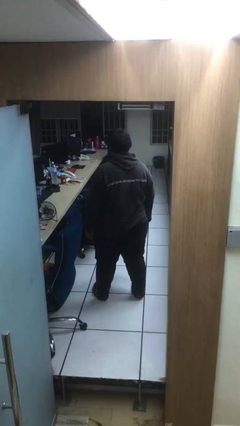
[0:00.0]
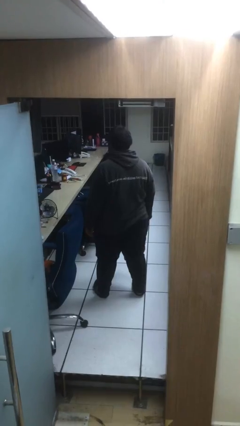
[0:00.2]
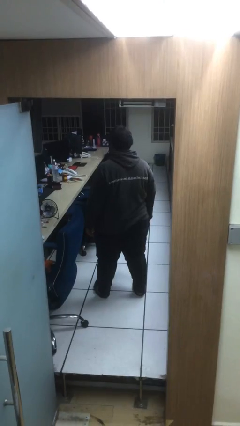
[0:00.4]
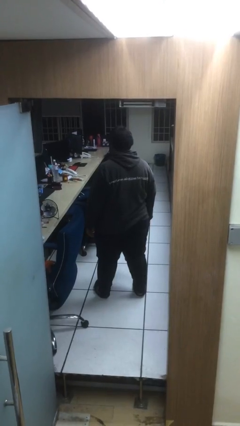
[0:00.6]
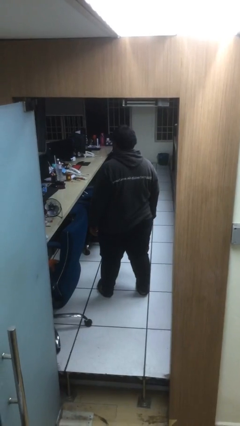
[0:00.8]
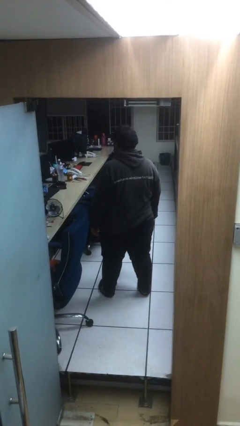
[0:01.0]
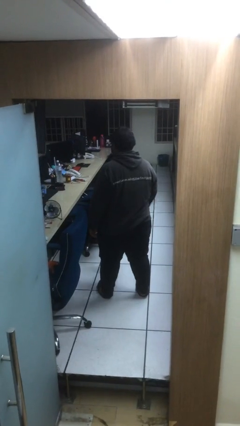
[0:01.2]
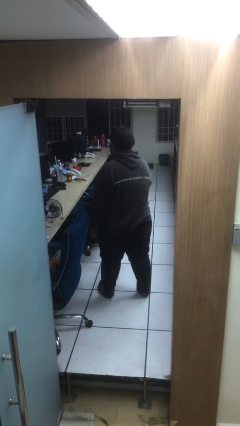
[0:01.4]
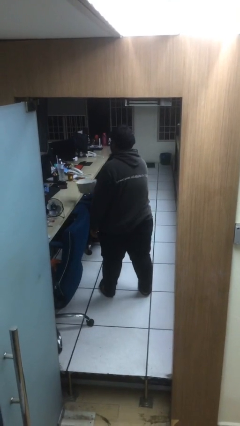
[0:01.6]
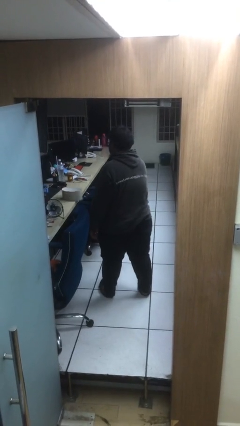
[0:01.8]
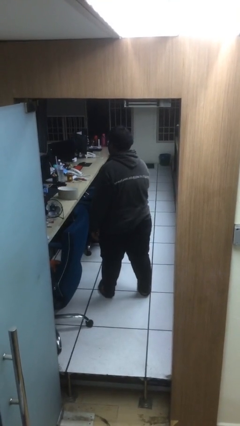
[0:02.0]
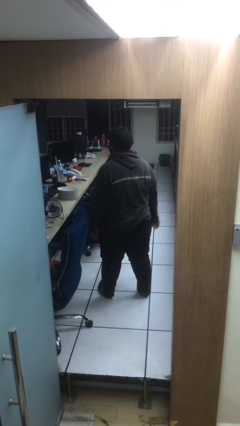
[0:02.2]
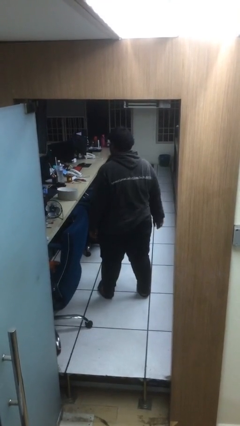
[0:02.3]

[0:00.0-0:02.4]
person throws object on table

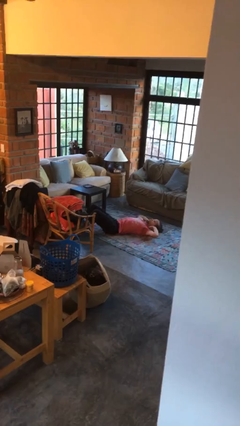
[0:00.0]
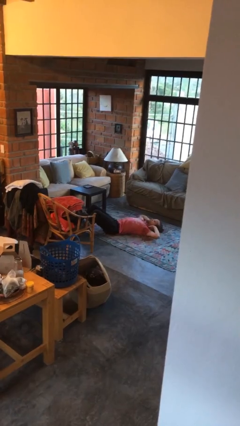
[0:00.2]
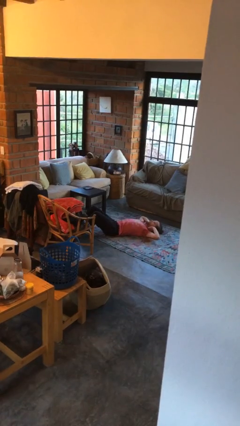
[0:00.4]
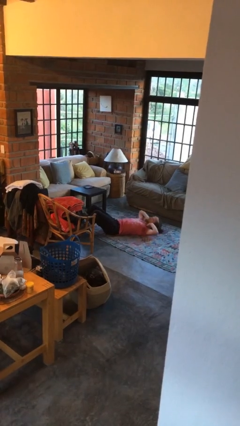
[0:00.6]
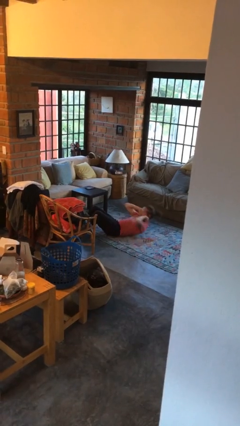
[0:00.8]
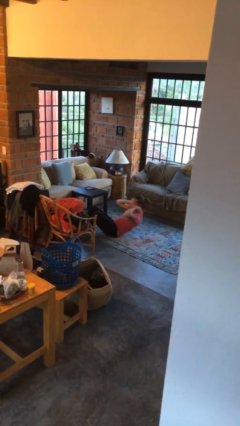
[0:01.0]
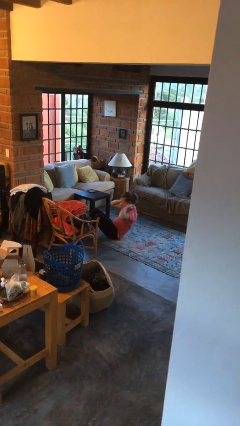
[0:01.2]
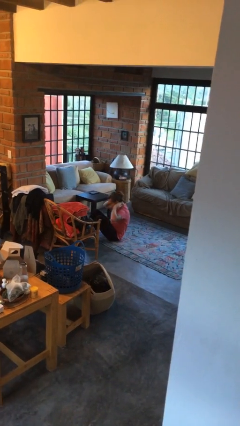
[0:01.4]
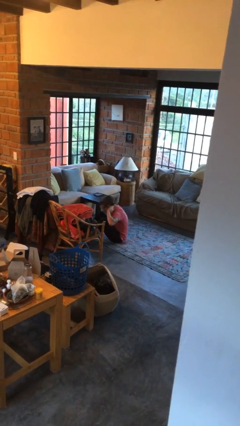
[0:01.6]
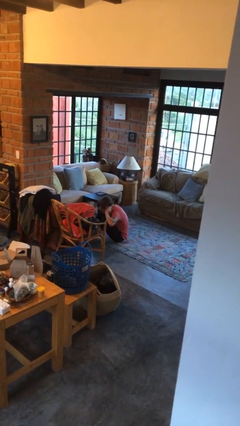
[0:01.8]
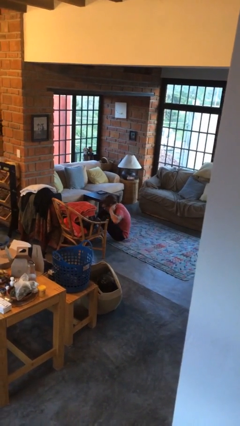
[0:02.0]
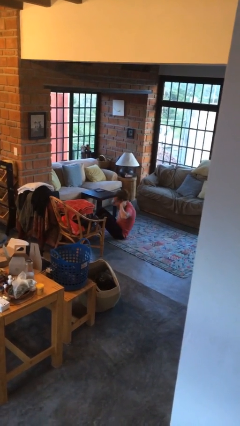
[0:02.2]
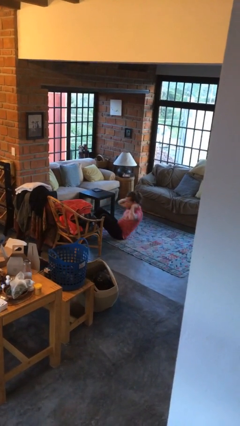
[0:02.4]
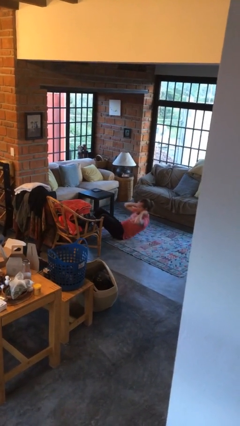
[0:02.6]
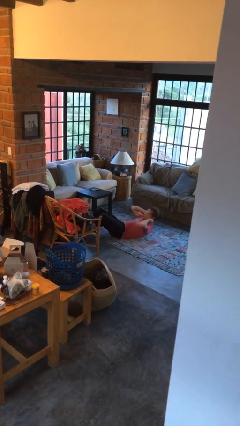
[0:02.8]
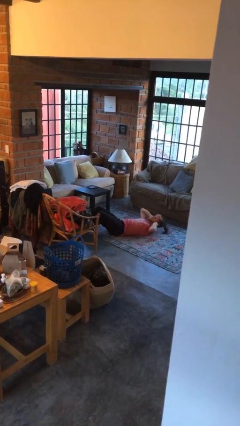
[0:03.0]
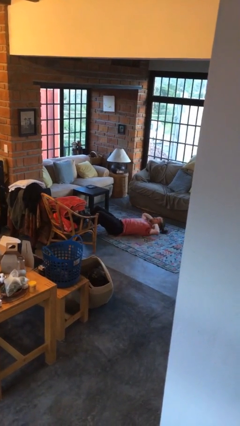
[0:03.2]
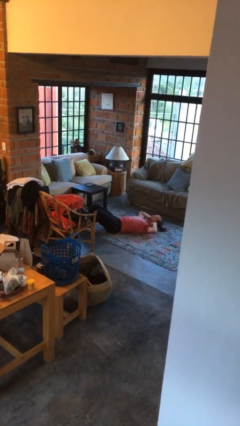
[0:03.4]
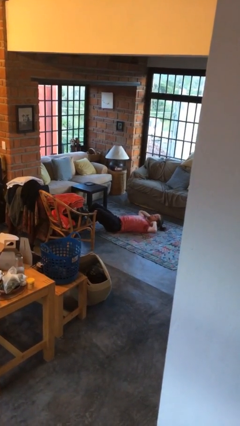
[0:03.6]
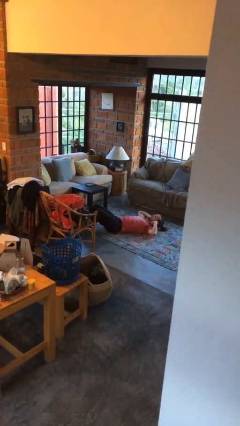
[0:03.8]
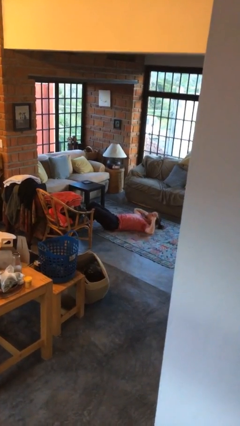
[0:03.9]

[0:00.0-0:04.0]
person exercises with situp

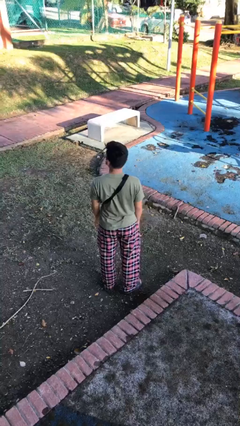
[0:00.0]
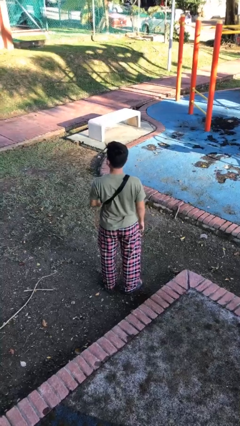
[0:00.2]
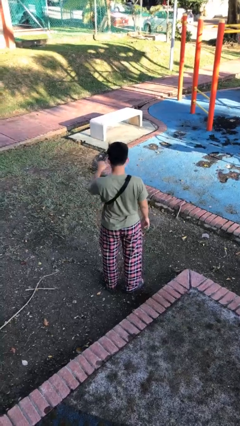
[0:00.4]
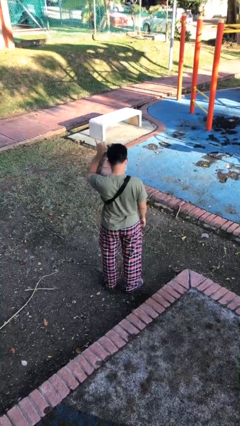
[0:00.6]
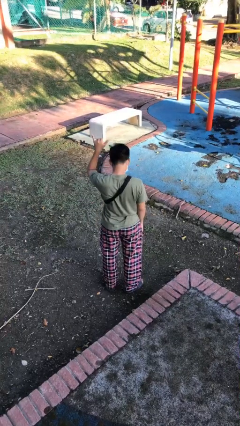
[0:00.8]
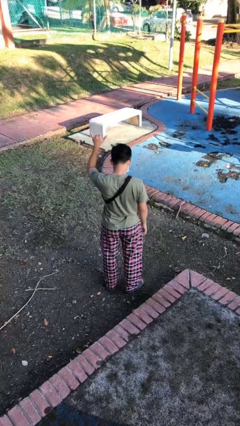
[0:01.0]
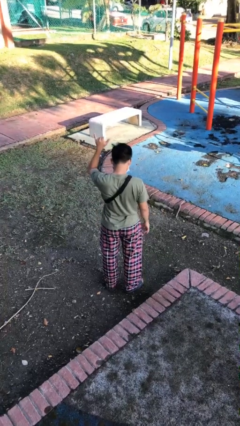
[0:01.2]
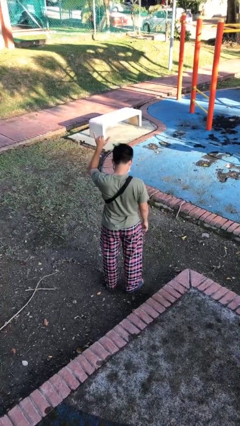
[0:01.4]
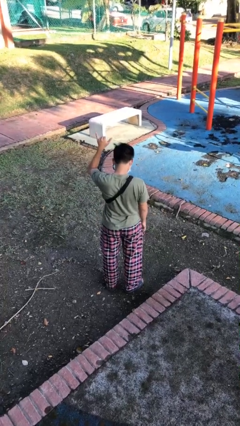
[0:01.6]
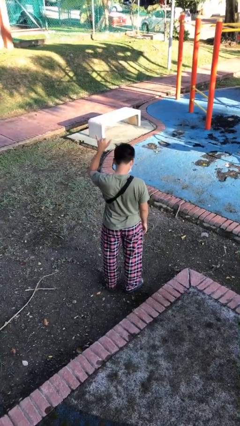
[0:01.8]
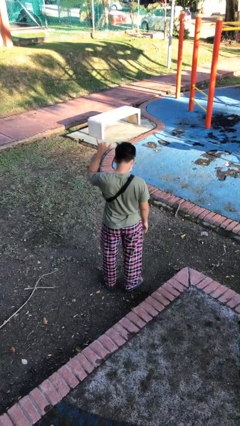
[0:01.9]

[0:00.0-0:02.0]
person gestures hang loose

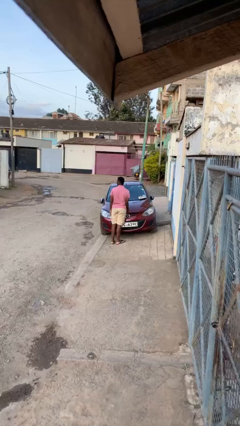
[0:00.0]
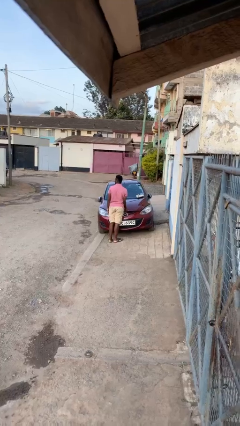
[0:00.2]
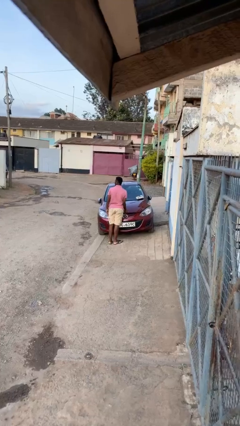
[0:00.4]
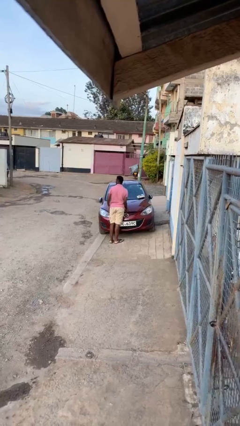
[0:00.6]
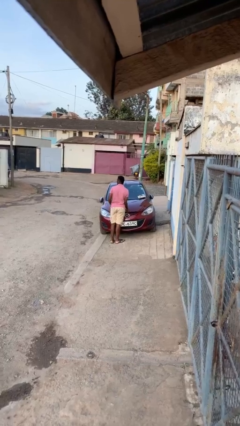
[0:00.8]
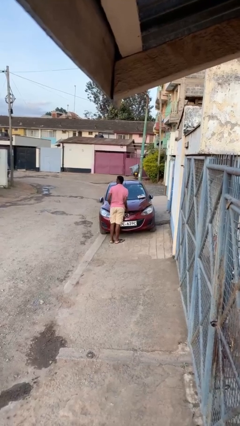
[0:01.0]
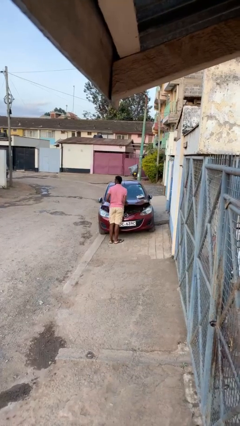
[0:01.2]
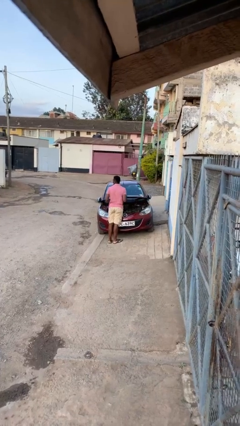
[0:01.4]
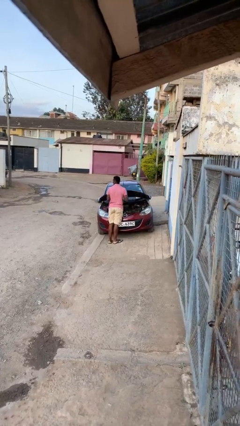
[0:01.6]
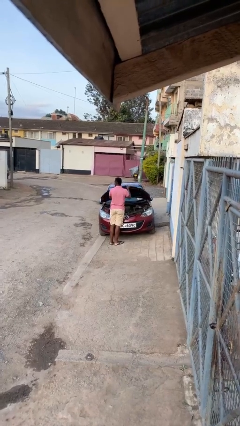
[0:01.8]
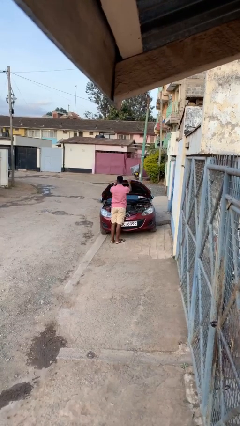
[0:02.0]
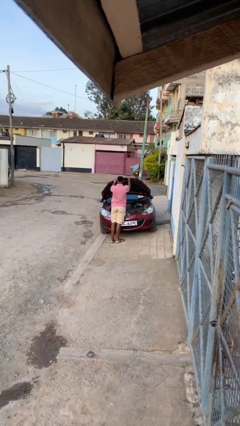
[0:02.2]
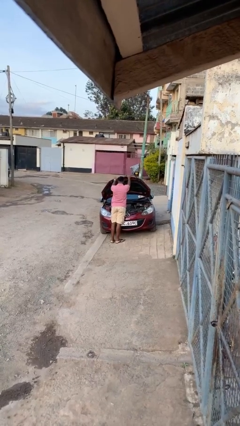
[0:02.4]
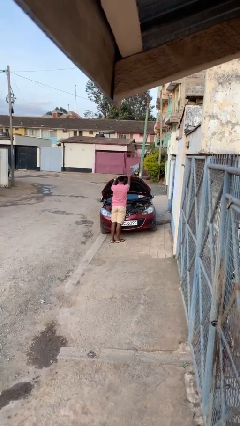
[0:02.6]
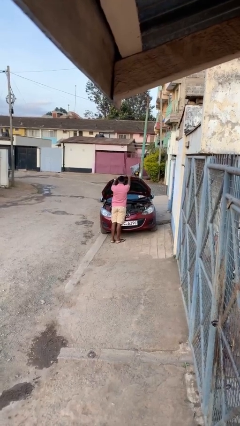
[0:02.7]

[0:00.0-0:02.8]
person opens car hood

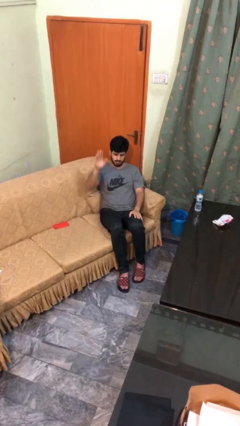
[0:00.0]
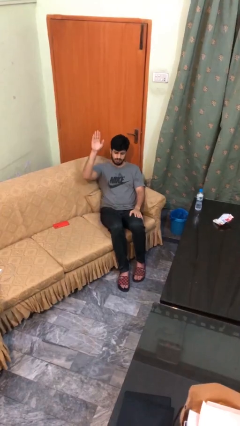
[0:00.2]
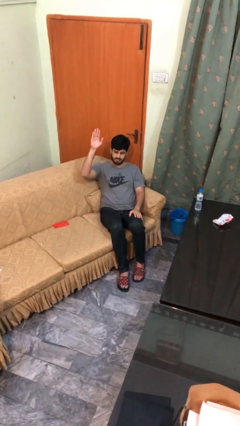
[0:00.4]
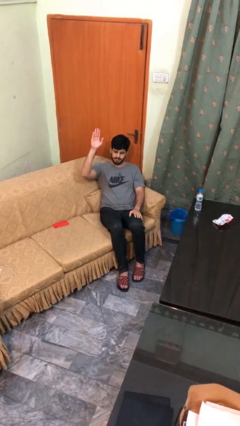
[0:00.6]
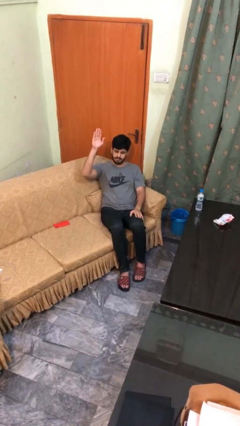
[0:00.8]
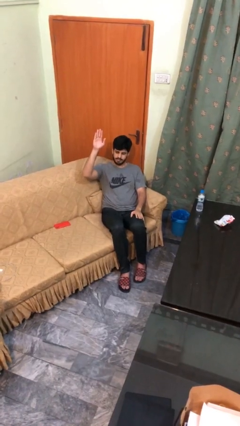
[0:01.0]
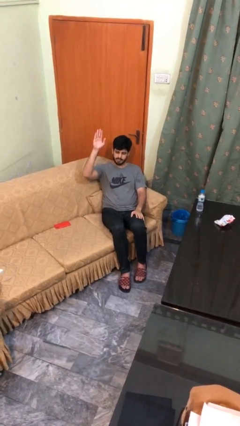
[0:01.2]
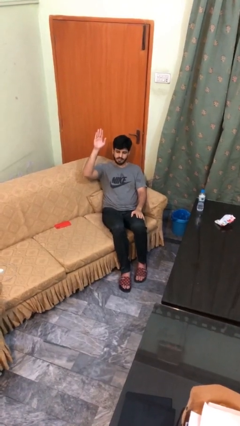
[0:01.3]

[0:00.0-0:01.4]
person gestures raise hand

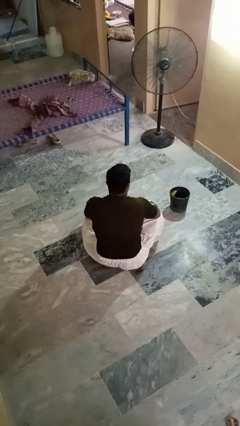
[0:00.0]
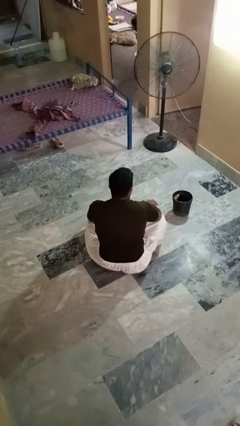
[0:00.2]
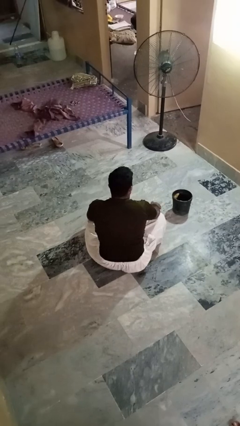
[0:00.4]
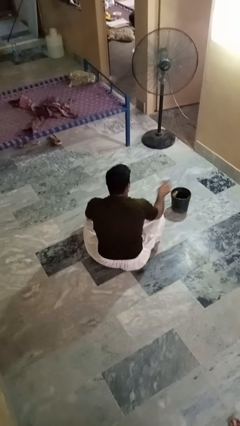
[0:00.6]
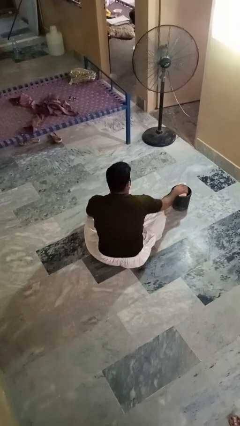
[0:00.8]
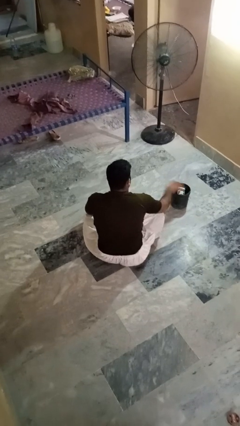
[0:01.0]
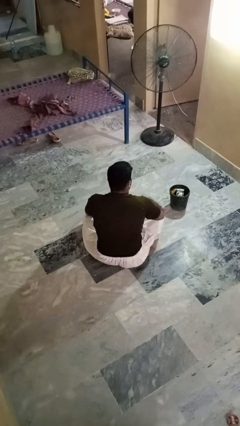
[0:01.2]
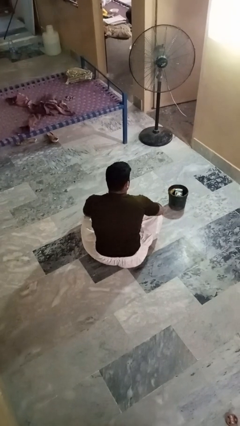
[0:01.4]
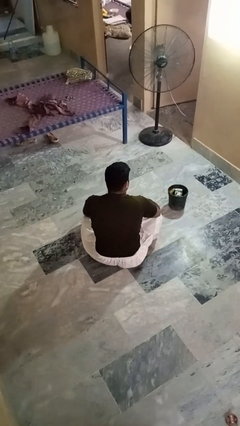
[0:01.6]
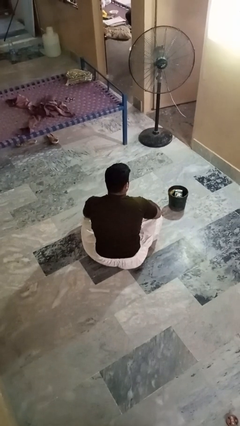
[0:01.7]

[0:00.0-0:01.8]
person puts object into basket

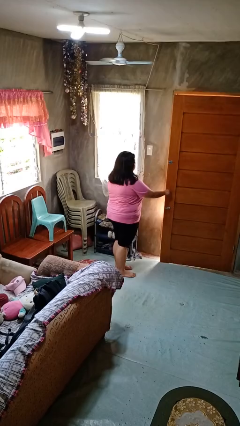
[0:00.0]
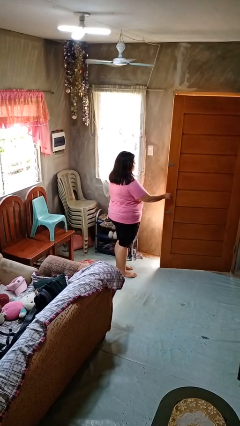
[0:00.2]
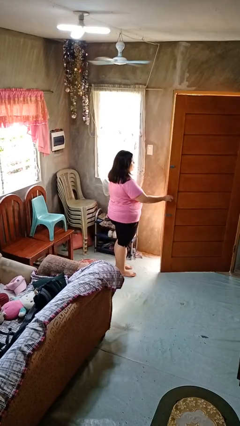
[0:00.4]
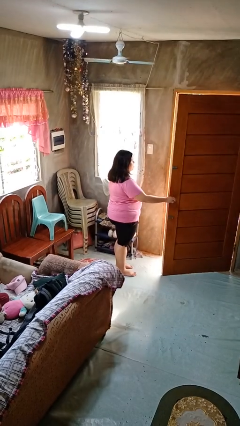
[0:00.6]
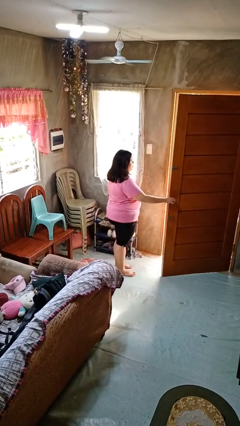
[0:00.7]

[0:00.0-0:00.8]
person opens facility door

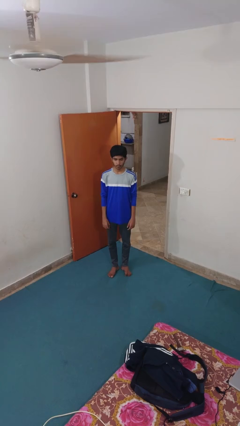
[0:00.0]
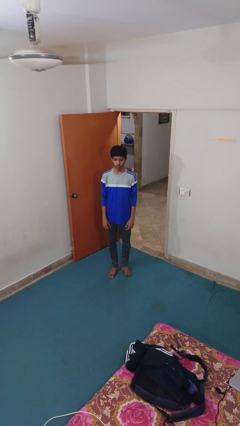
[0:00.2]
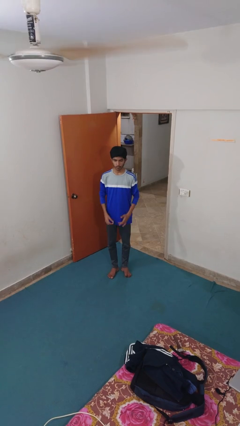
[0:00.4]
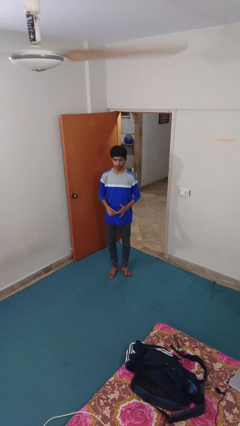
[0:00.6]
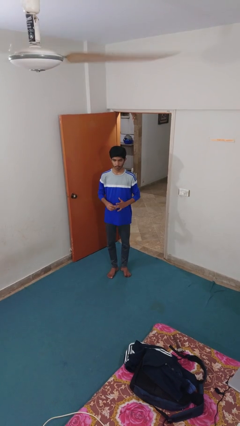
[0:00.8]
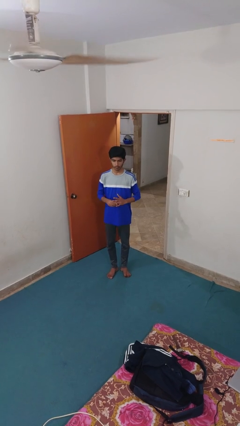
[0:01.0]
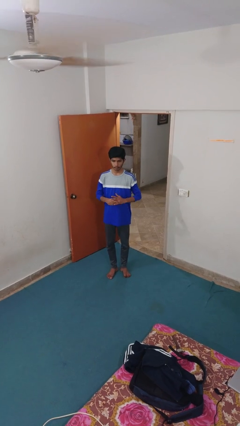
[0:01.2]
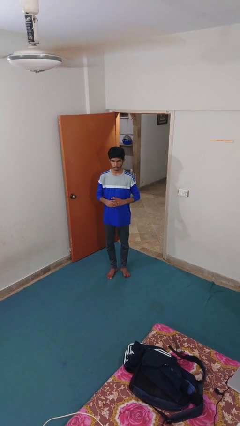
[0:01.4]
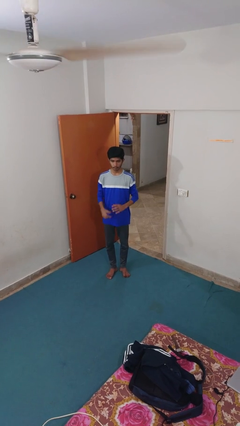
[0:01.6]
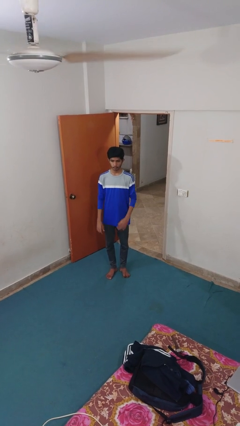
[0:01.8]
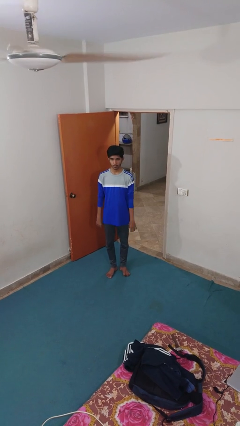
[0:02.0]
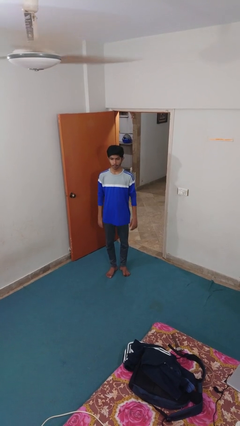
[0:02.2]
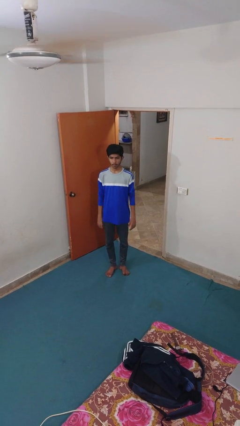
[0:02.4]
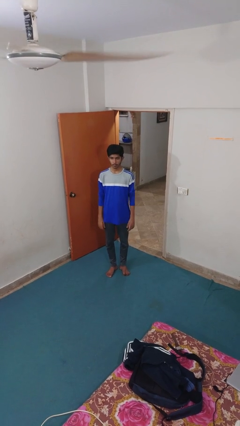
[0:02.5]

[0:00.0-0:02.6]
person puts on ring
